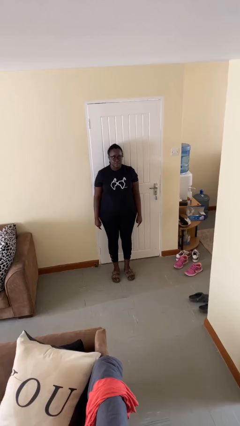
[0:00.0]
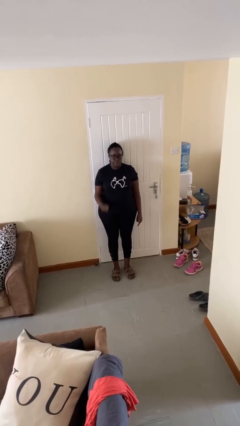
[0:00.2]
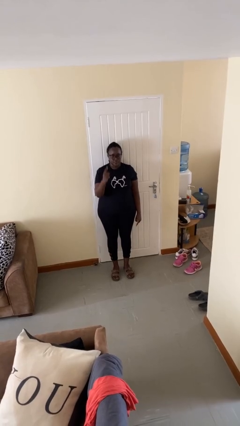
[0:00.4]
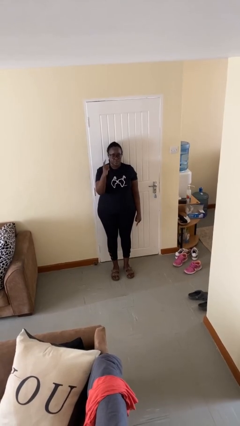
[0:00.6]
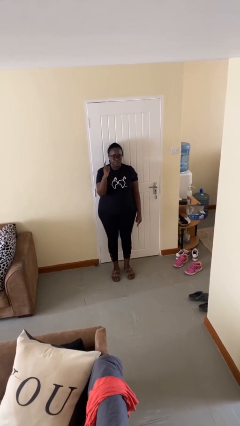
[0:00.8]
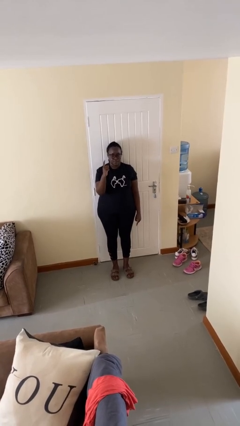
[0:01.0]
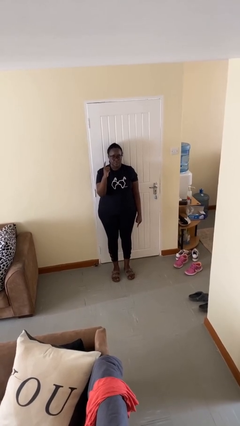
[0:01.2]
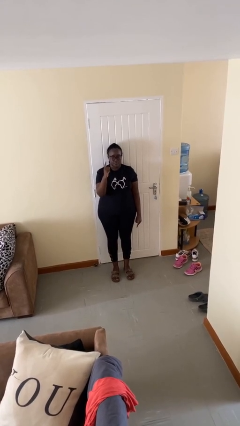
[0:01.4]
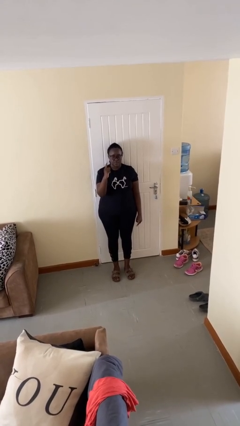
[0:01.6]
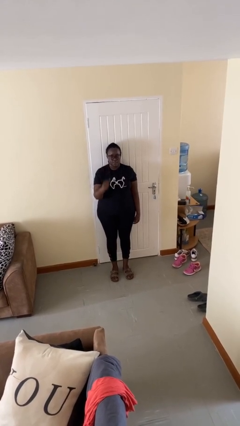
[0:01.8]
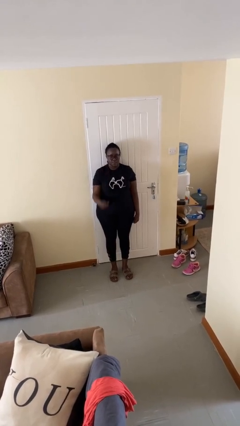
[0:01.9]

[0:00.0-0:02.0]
person gestures number one

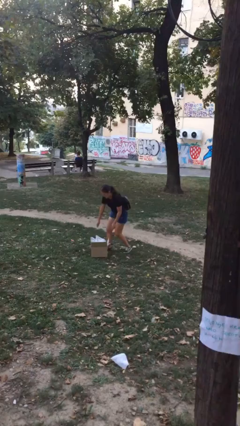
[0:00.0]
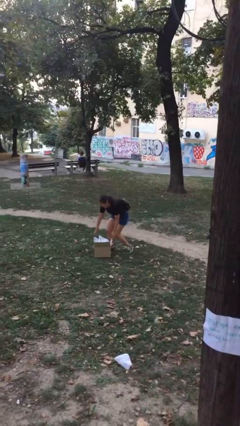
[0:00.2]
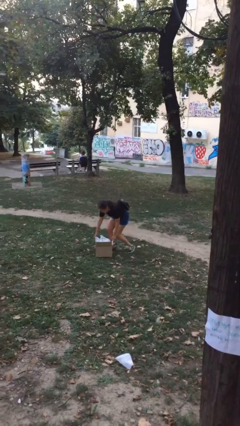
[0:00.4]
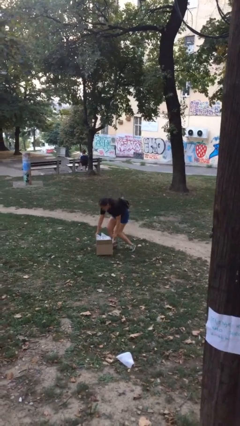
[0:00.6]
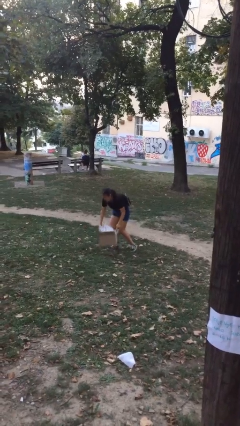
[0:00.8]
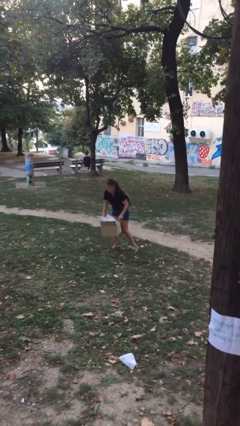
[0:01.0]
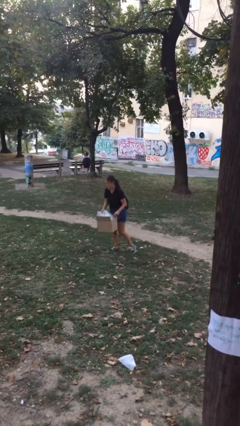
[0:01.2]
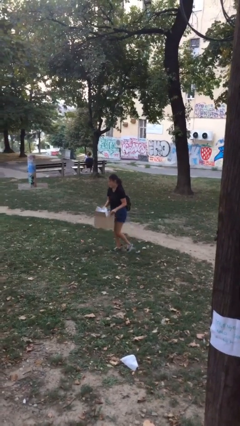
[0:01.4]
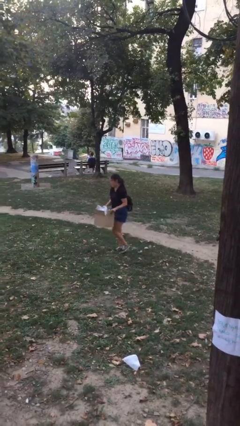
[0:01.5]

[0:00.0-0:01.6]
person picks up object from floor

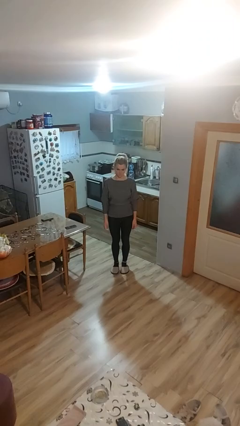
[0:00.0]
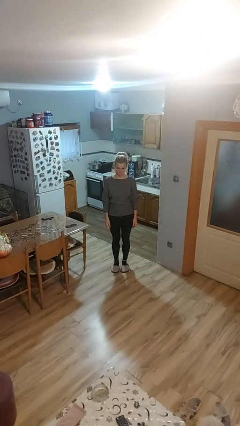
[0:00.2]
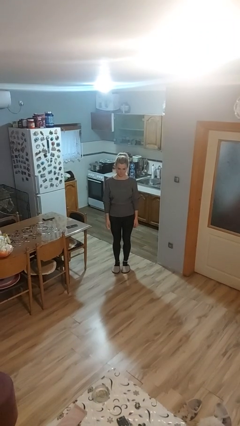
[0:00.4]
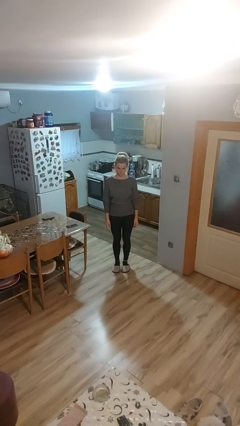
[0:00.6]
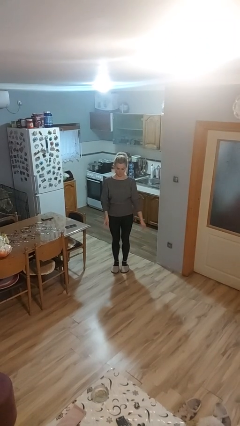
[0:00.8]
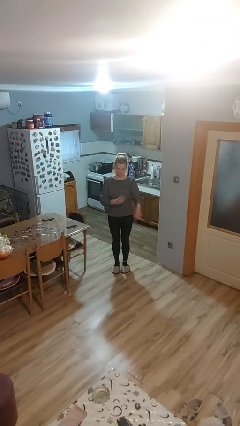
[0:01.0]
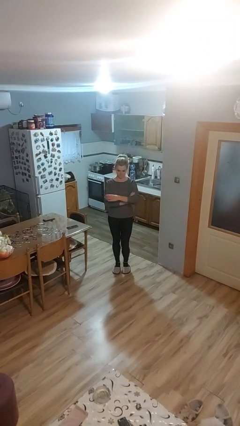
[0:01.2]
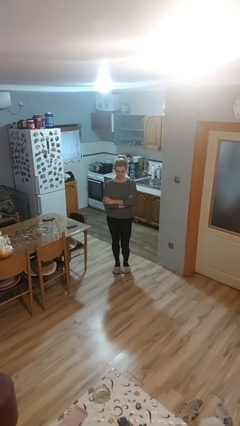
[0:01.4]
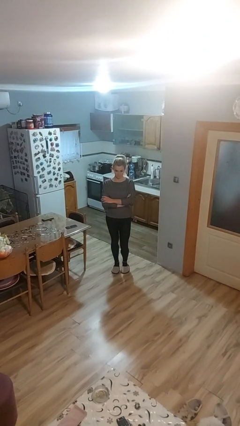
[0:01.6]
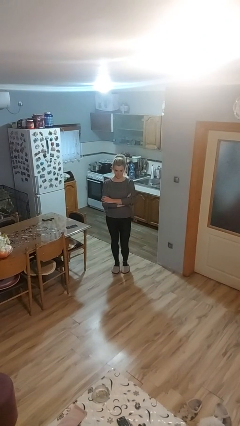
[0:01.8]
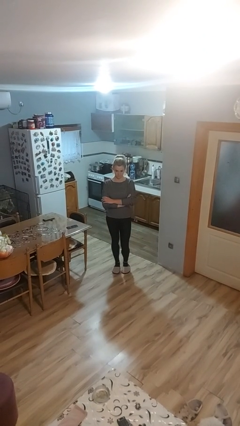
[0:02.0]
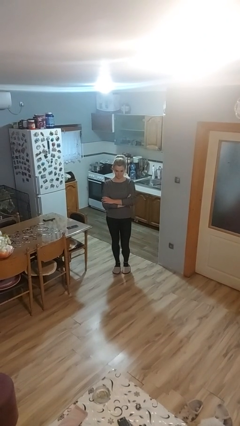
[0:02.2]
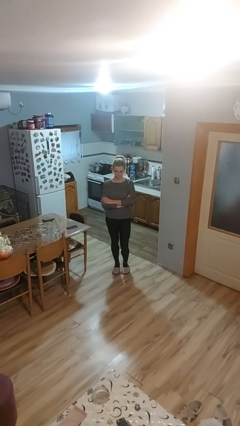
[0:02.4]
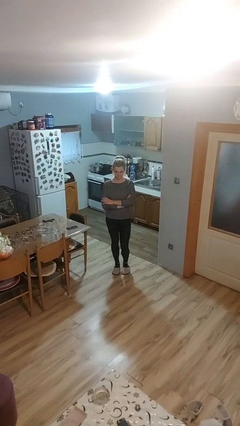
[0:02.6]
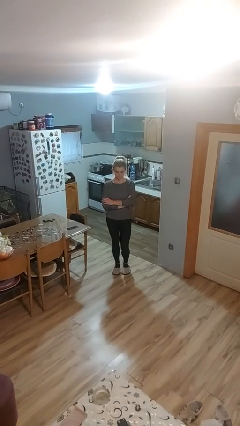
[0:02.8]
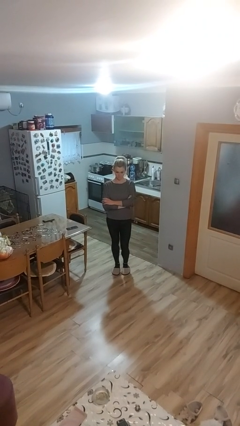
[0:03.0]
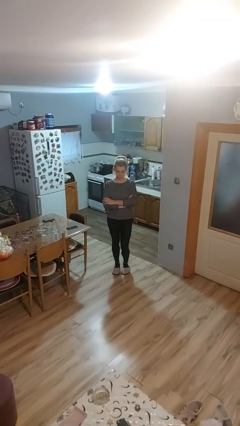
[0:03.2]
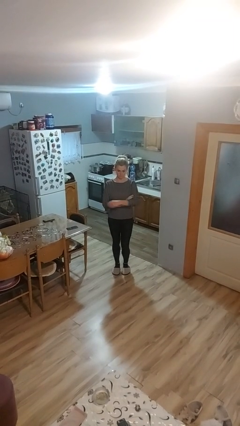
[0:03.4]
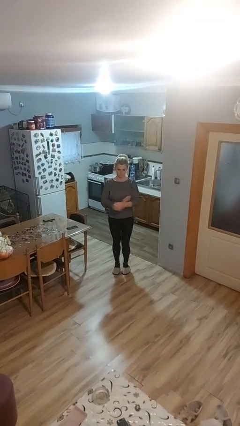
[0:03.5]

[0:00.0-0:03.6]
person crosses arms

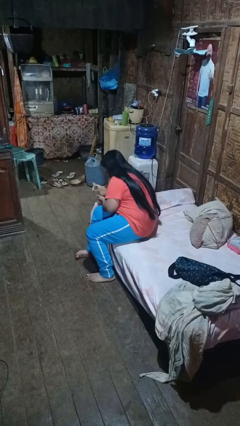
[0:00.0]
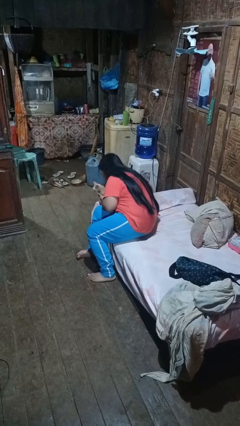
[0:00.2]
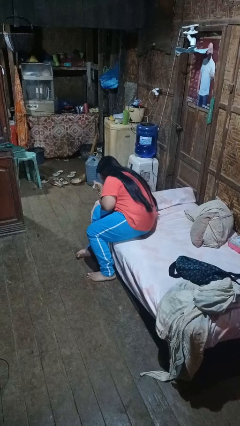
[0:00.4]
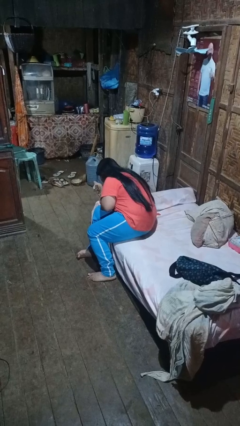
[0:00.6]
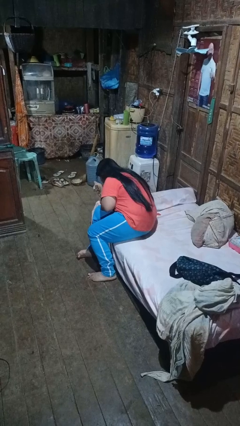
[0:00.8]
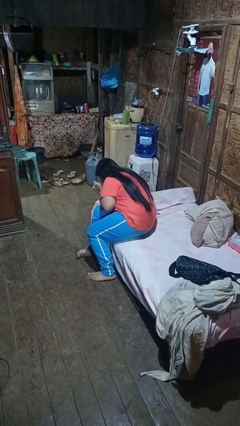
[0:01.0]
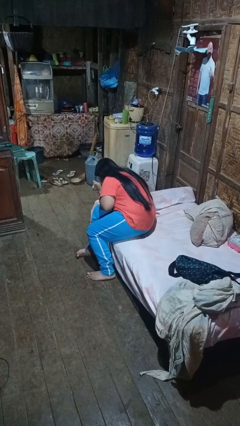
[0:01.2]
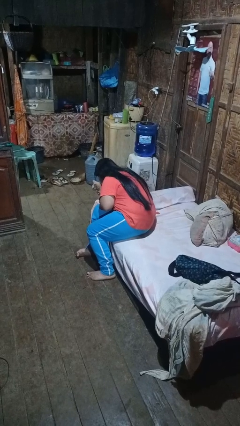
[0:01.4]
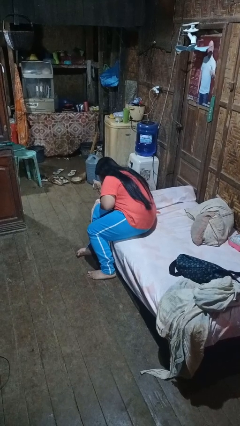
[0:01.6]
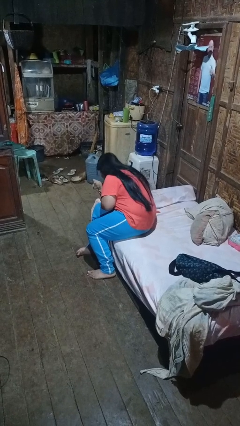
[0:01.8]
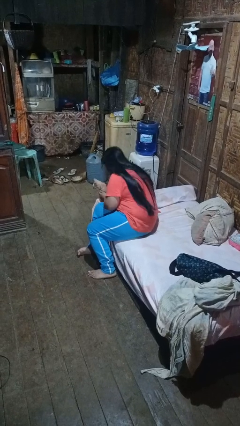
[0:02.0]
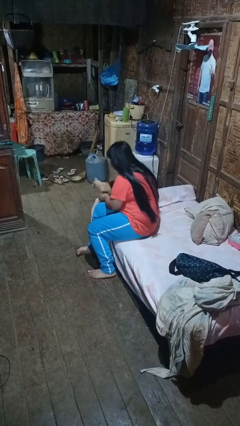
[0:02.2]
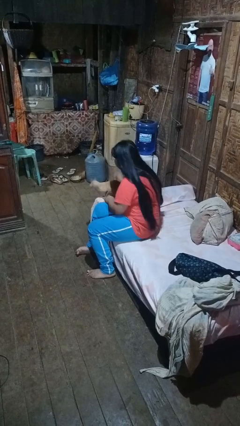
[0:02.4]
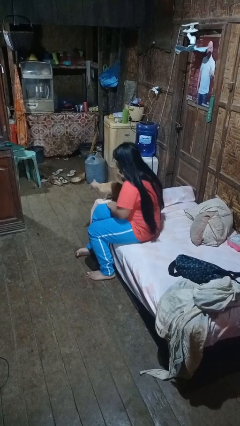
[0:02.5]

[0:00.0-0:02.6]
person hugs cat

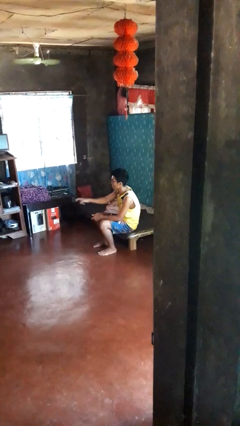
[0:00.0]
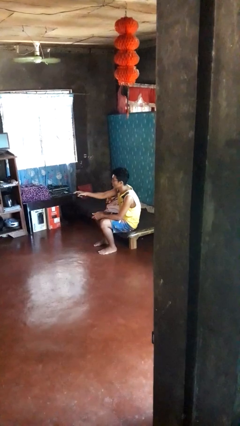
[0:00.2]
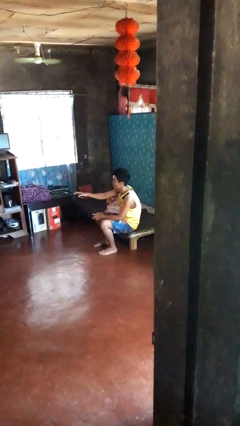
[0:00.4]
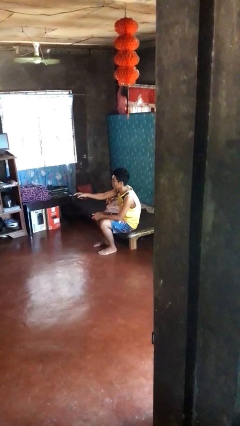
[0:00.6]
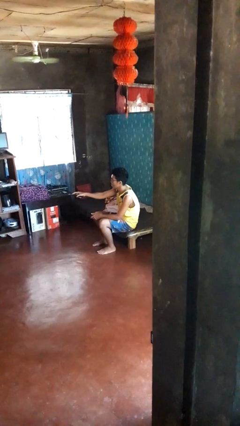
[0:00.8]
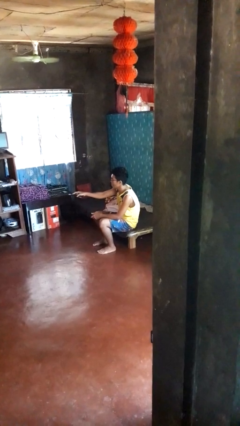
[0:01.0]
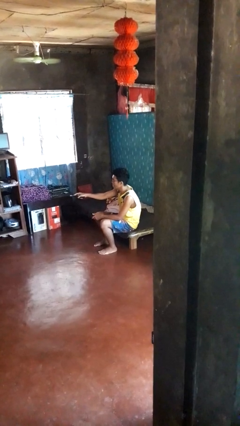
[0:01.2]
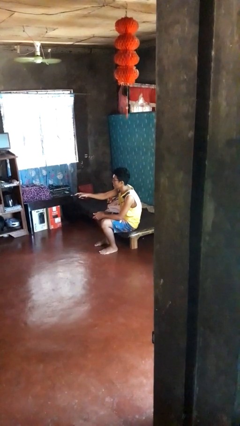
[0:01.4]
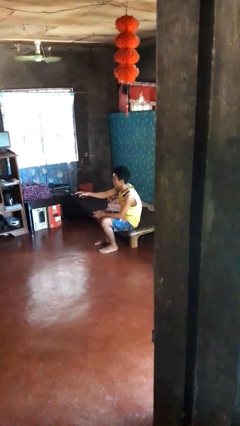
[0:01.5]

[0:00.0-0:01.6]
person uses television remote

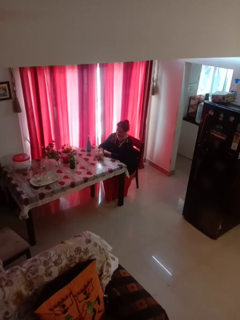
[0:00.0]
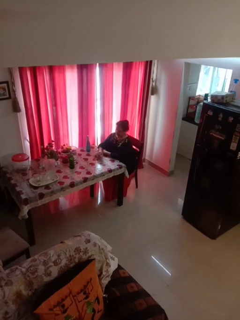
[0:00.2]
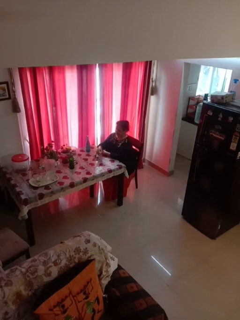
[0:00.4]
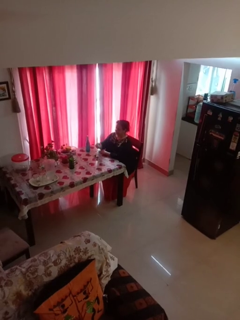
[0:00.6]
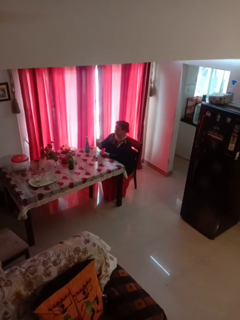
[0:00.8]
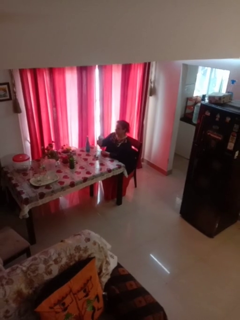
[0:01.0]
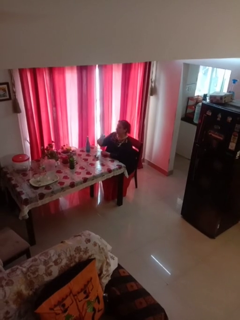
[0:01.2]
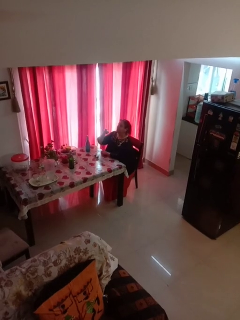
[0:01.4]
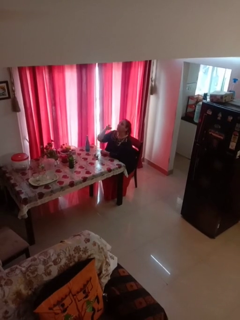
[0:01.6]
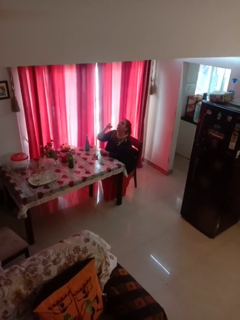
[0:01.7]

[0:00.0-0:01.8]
person picks up object from table

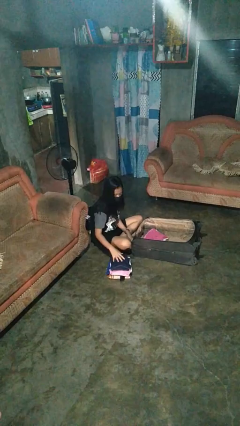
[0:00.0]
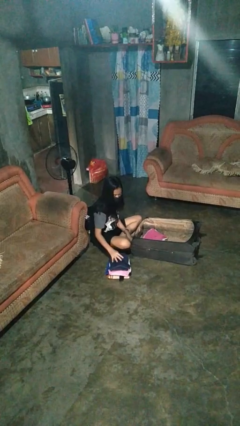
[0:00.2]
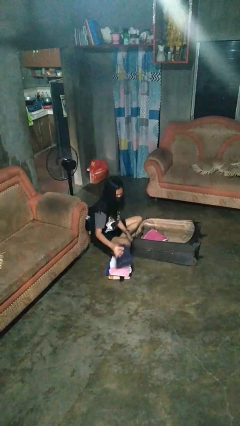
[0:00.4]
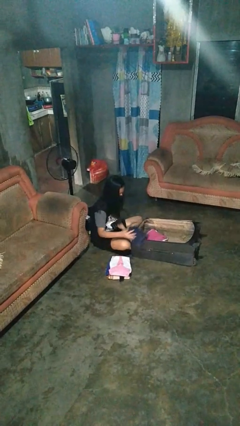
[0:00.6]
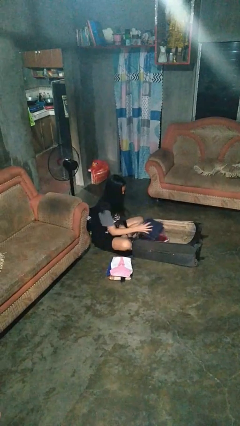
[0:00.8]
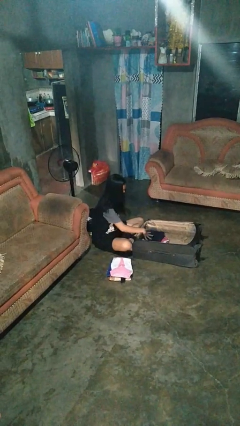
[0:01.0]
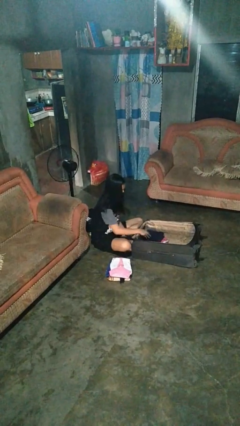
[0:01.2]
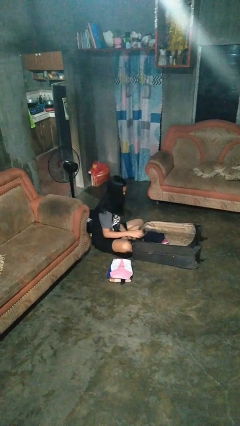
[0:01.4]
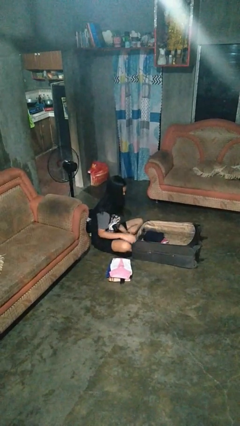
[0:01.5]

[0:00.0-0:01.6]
person loads clothes into suitcase

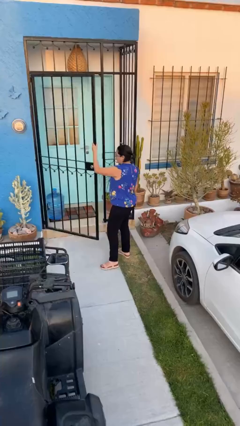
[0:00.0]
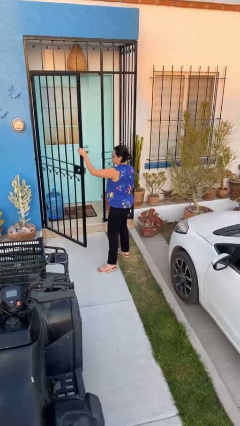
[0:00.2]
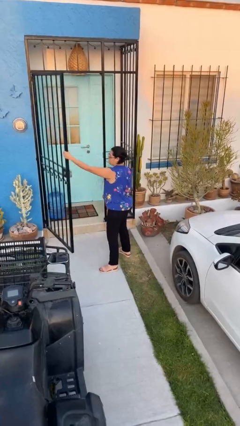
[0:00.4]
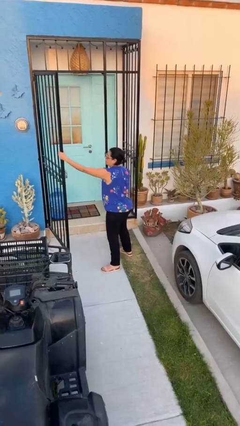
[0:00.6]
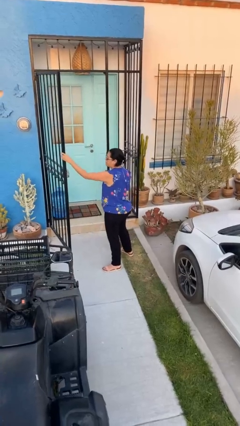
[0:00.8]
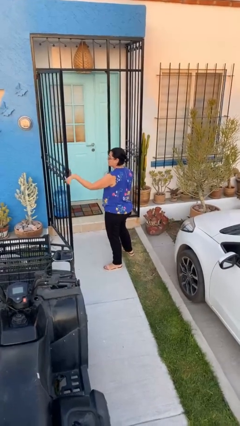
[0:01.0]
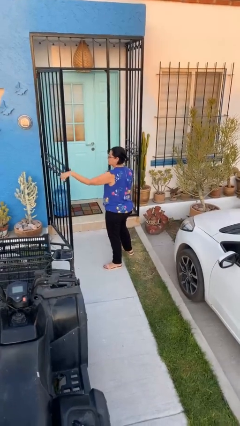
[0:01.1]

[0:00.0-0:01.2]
person opens facility door

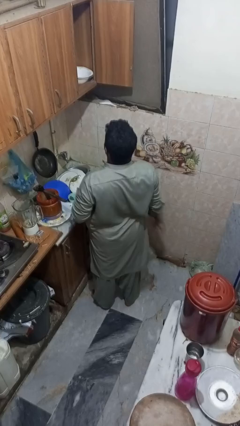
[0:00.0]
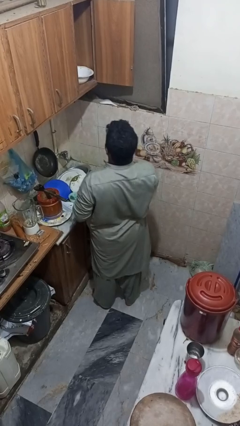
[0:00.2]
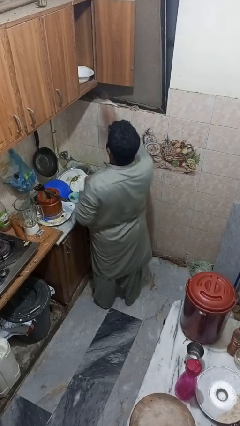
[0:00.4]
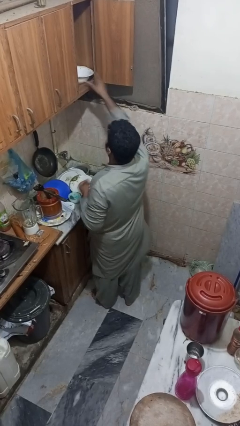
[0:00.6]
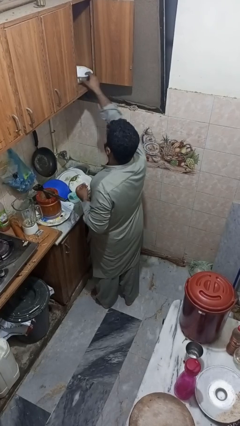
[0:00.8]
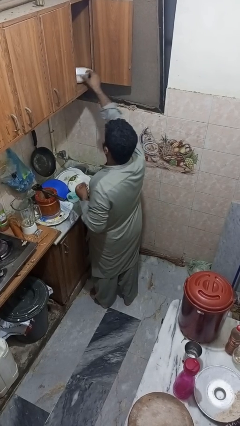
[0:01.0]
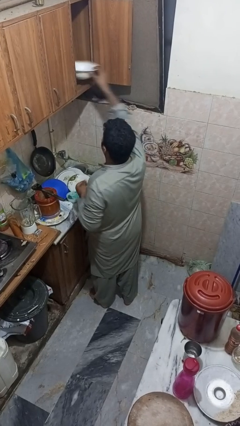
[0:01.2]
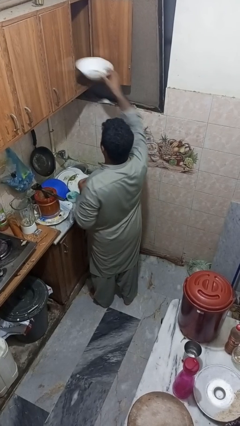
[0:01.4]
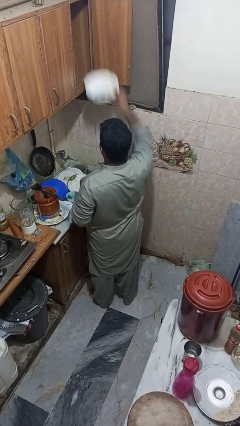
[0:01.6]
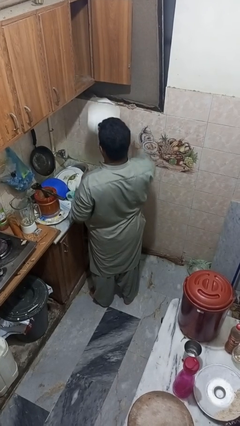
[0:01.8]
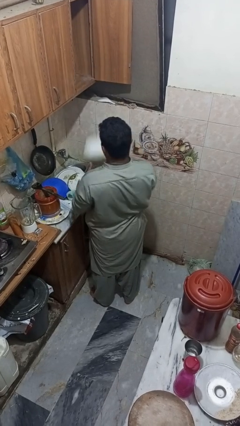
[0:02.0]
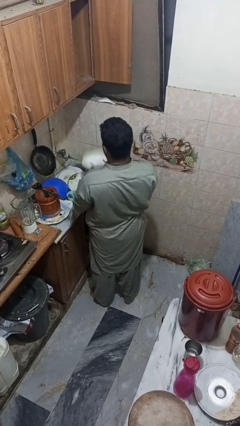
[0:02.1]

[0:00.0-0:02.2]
person takes object from cabinet
